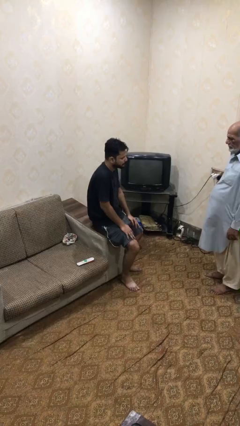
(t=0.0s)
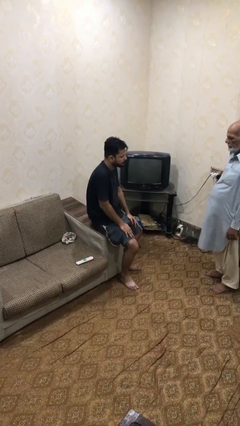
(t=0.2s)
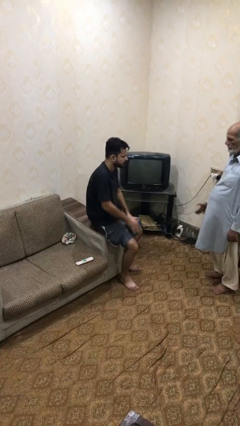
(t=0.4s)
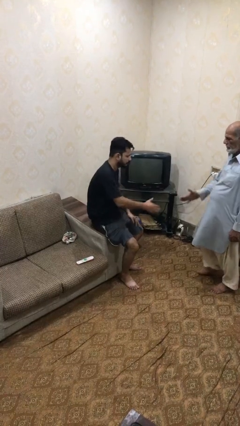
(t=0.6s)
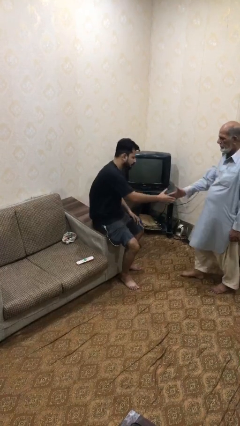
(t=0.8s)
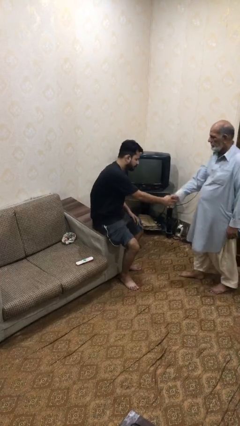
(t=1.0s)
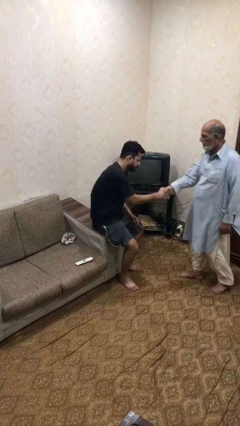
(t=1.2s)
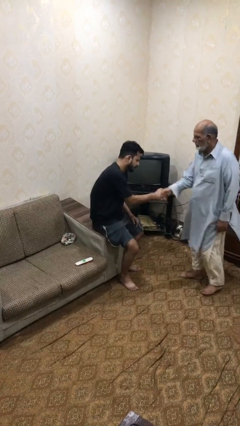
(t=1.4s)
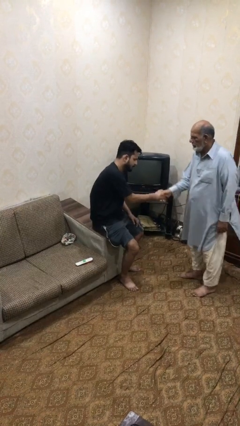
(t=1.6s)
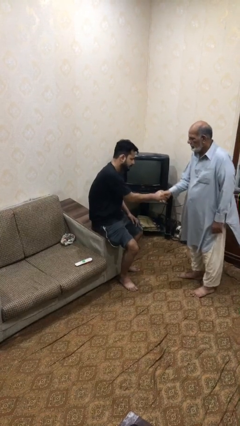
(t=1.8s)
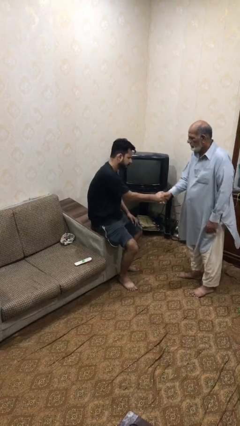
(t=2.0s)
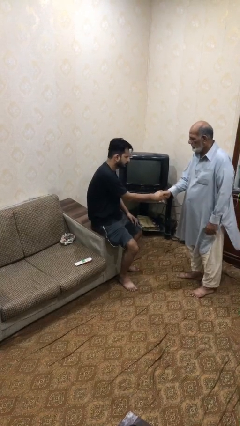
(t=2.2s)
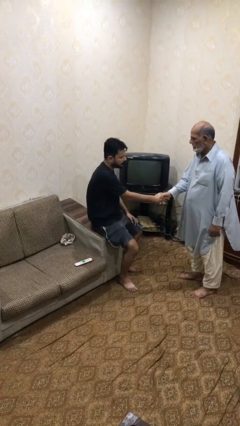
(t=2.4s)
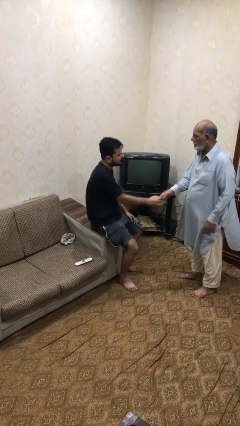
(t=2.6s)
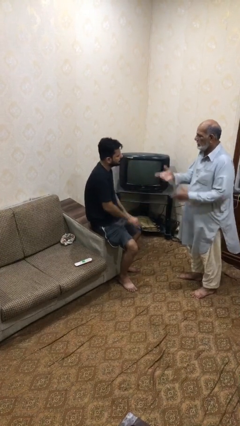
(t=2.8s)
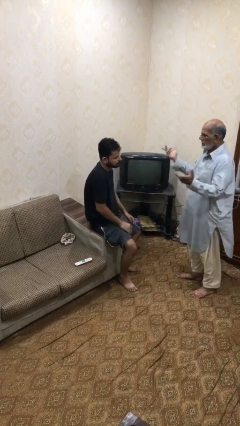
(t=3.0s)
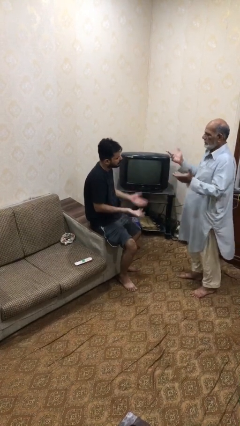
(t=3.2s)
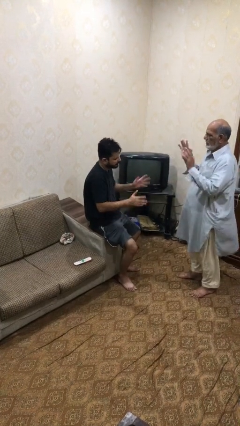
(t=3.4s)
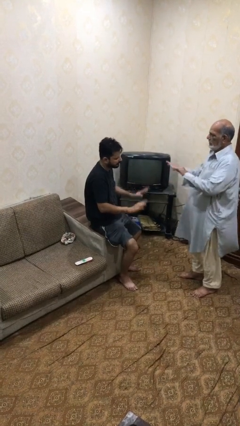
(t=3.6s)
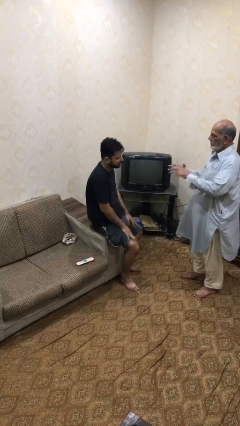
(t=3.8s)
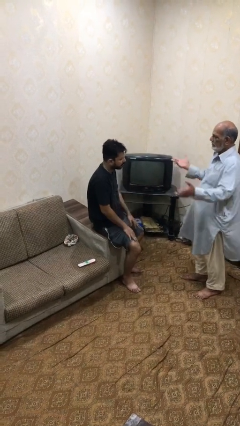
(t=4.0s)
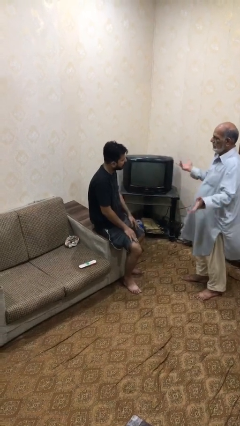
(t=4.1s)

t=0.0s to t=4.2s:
person shakes hand

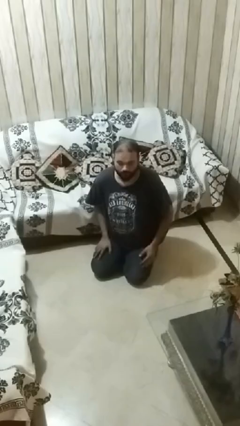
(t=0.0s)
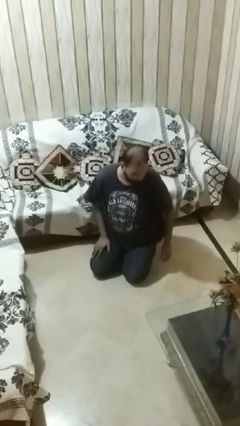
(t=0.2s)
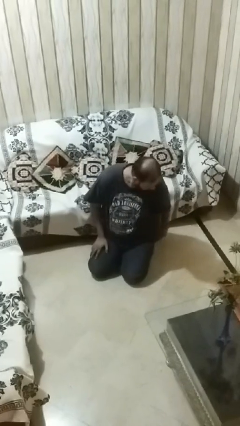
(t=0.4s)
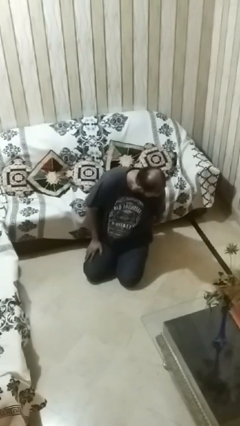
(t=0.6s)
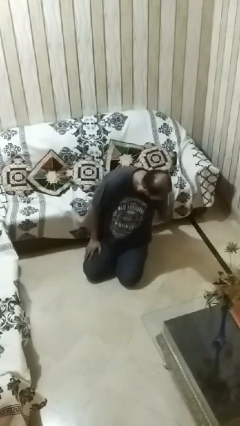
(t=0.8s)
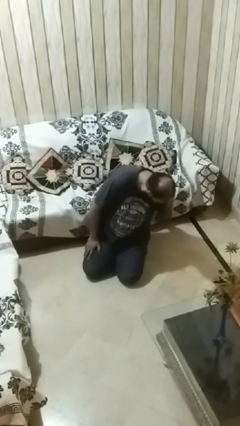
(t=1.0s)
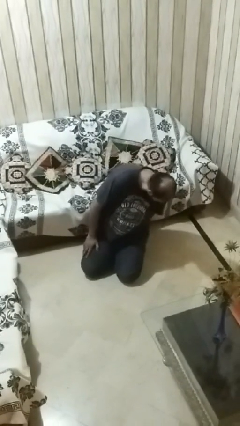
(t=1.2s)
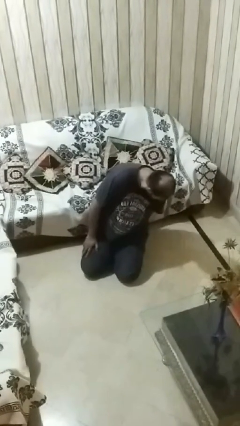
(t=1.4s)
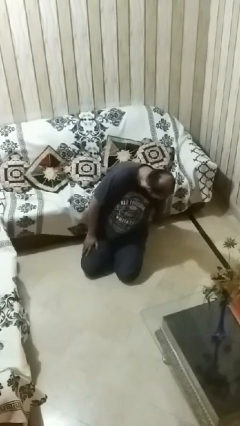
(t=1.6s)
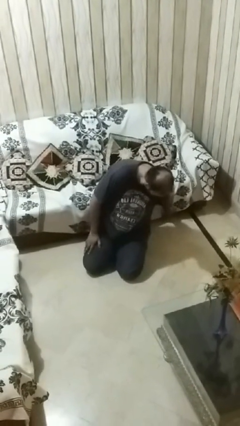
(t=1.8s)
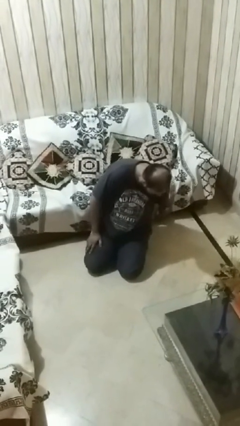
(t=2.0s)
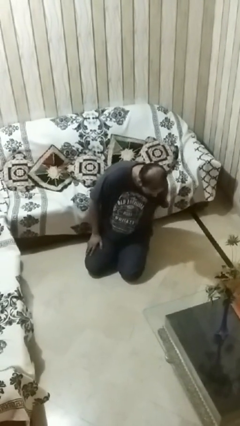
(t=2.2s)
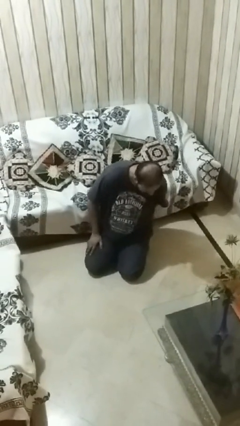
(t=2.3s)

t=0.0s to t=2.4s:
person searches under couch

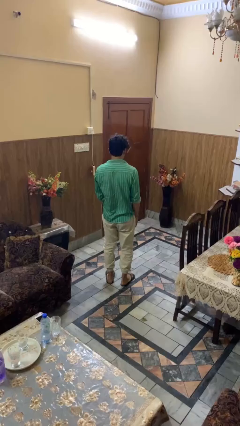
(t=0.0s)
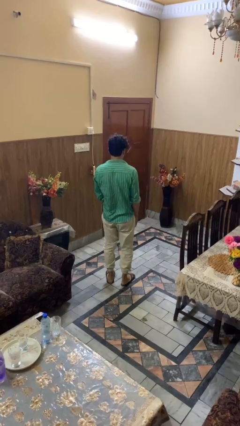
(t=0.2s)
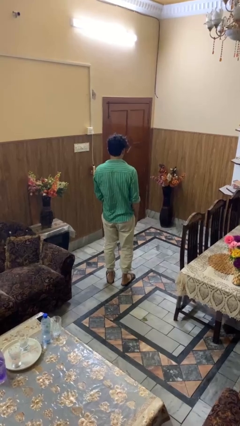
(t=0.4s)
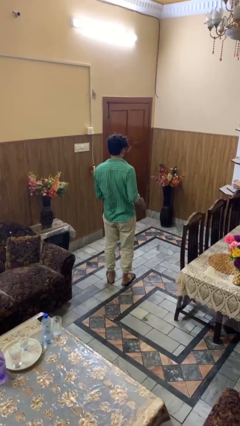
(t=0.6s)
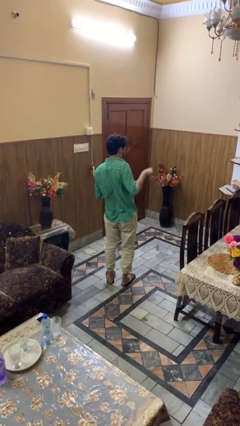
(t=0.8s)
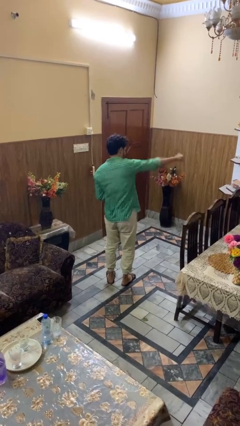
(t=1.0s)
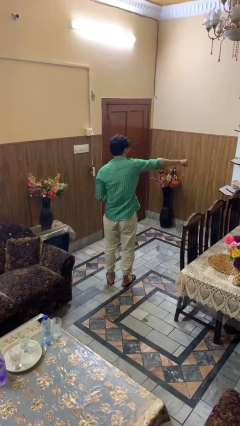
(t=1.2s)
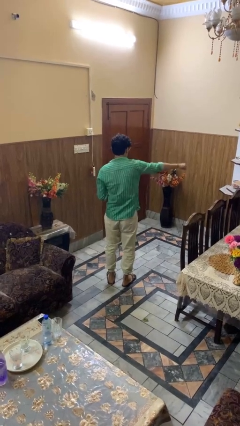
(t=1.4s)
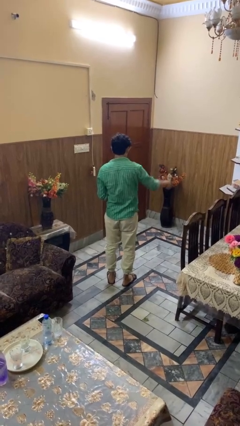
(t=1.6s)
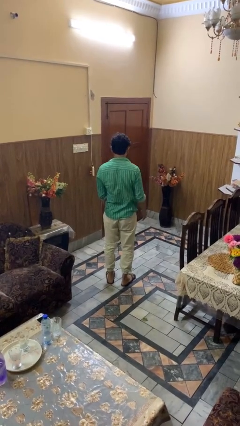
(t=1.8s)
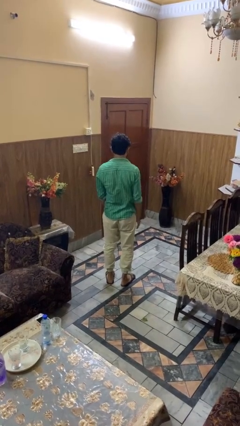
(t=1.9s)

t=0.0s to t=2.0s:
person karate chop

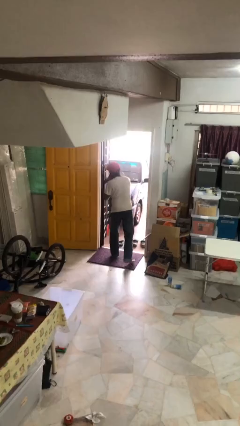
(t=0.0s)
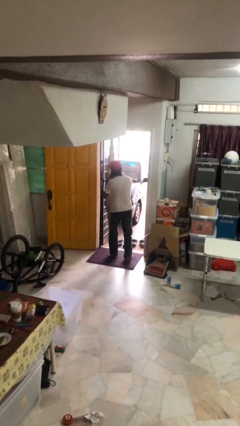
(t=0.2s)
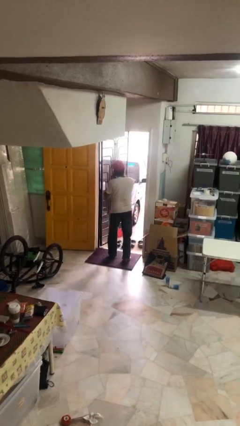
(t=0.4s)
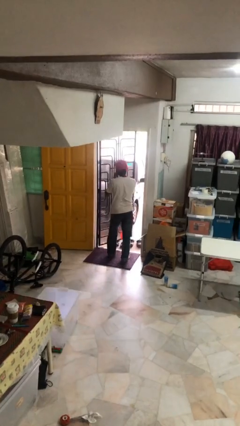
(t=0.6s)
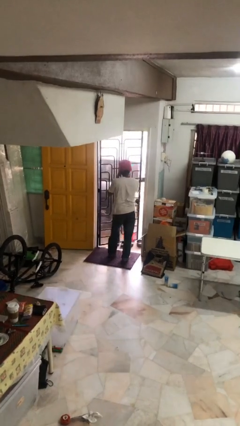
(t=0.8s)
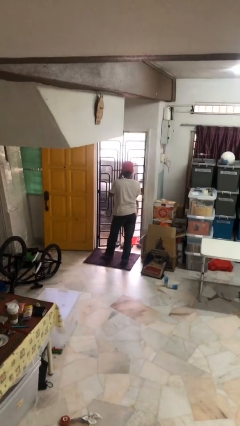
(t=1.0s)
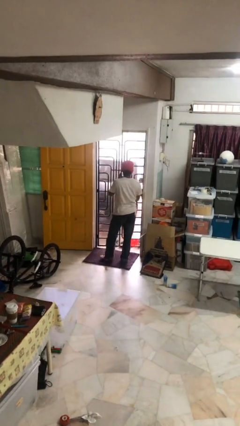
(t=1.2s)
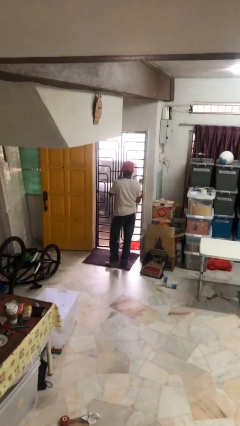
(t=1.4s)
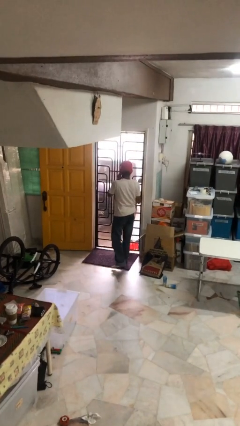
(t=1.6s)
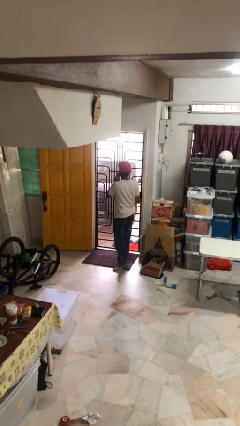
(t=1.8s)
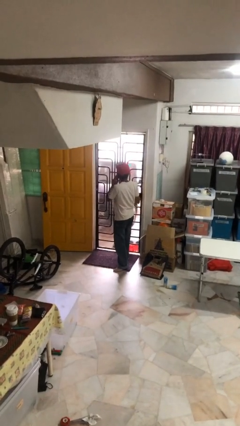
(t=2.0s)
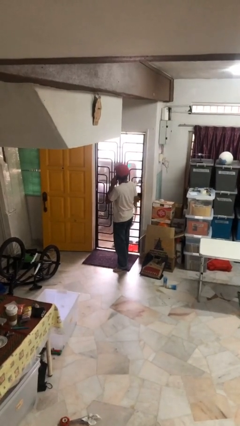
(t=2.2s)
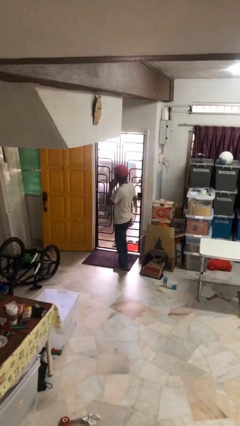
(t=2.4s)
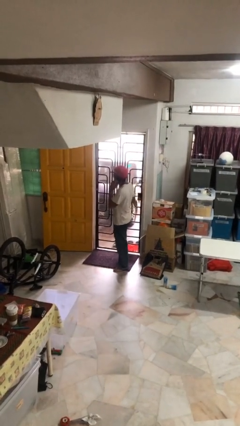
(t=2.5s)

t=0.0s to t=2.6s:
person closes facility door

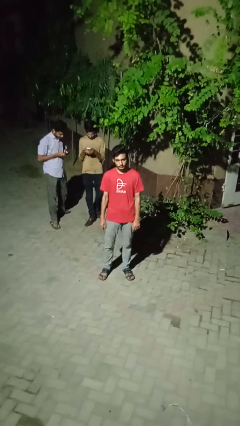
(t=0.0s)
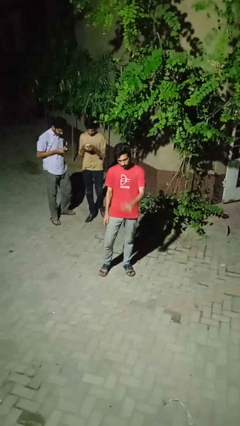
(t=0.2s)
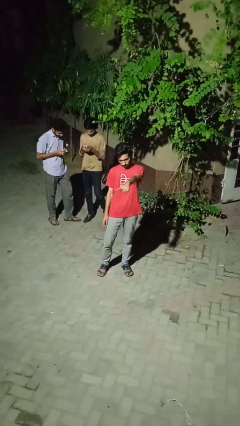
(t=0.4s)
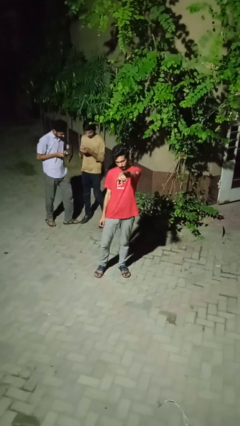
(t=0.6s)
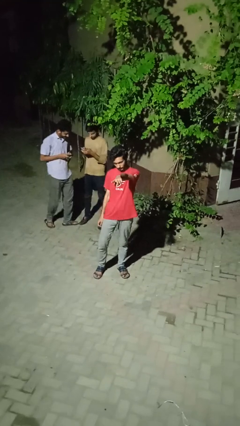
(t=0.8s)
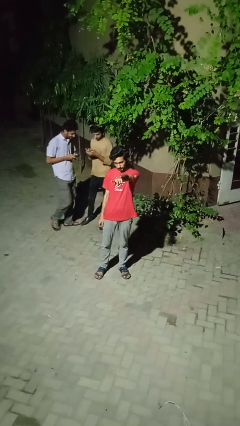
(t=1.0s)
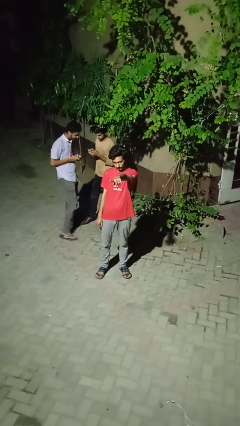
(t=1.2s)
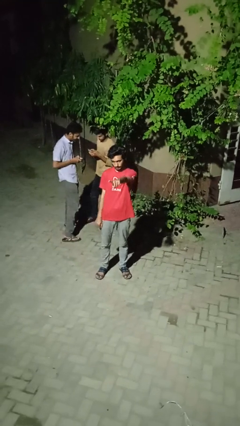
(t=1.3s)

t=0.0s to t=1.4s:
person points at person

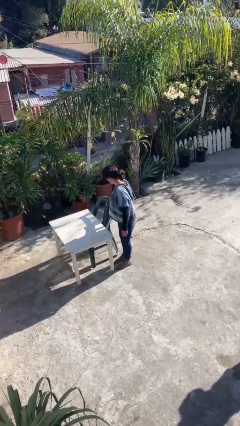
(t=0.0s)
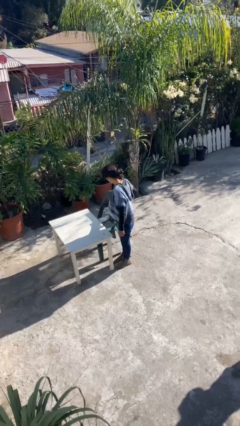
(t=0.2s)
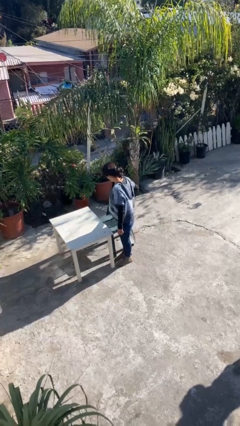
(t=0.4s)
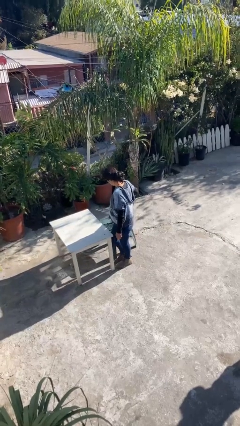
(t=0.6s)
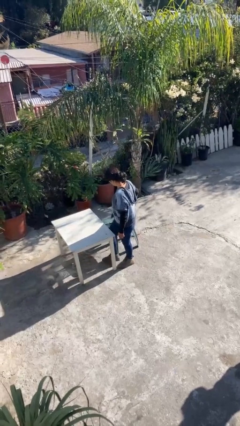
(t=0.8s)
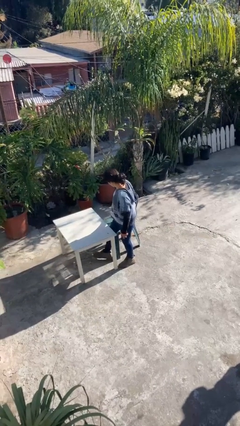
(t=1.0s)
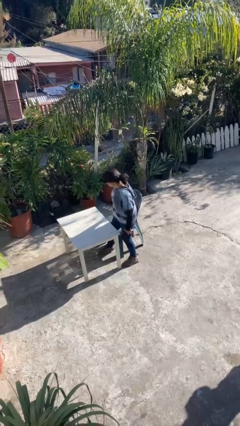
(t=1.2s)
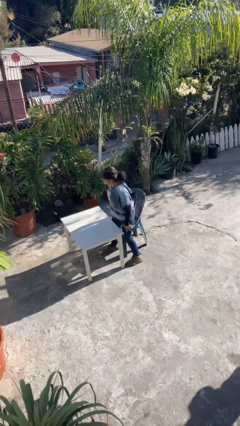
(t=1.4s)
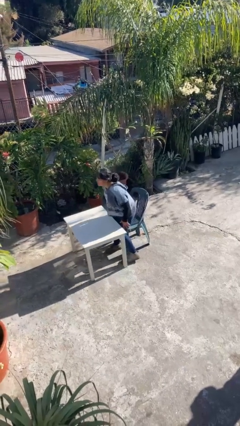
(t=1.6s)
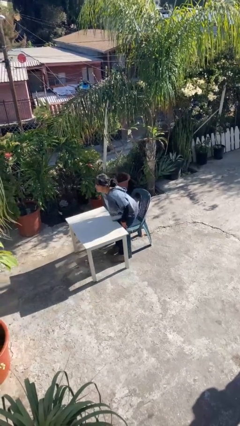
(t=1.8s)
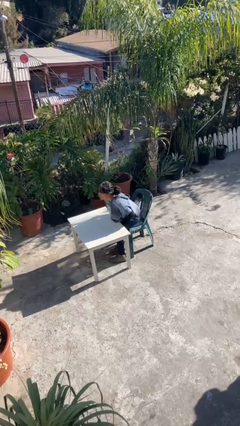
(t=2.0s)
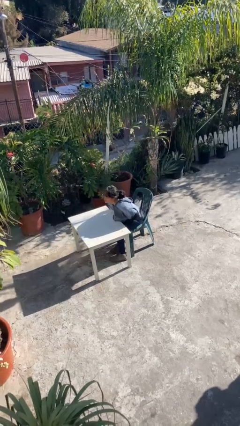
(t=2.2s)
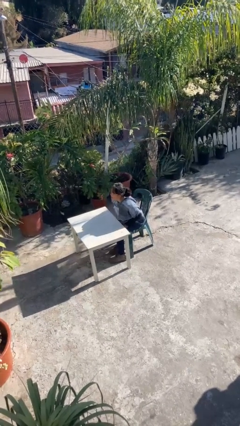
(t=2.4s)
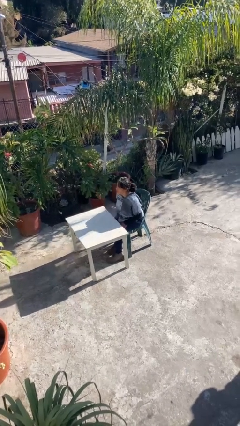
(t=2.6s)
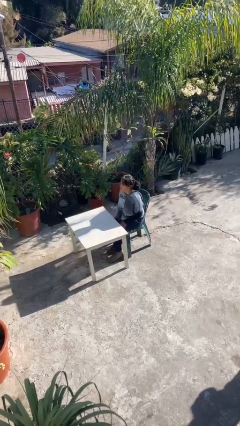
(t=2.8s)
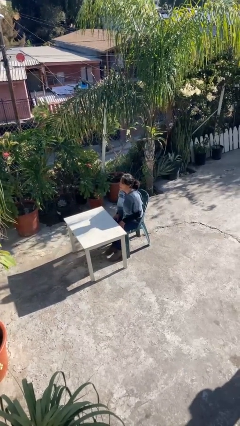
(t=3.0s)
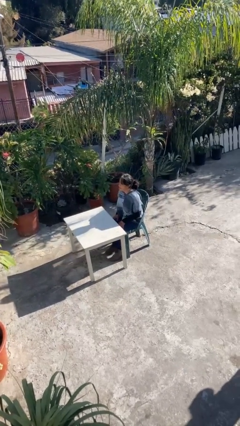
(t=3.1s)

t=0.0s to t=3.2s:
person sits down

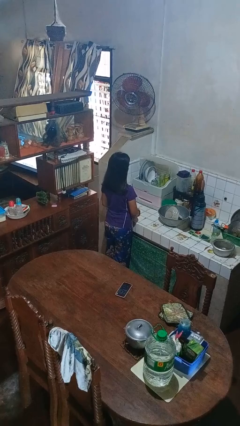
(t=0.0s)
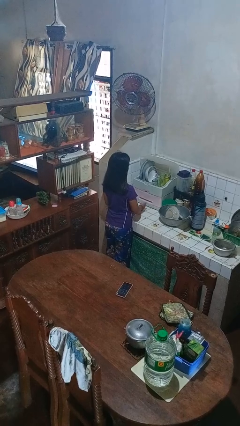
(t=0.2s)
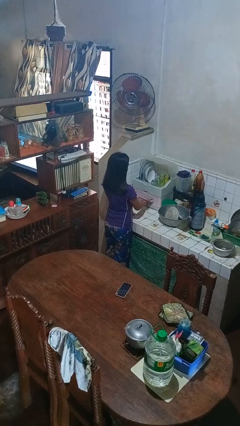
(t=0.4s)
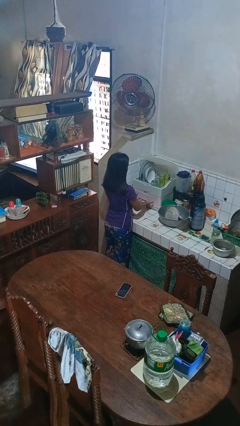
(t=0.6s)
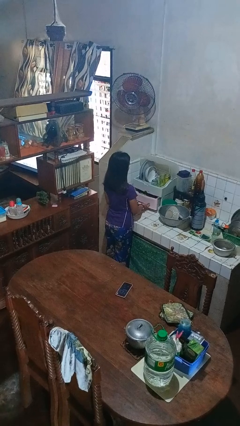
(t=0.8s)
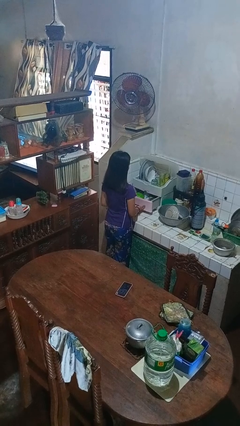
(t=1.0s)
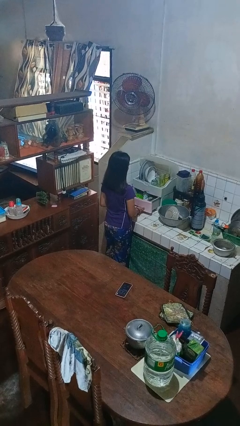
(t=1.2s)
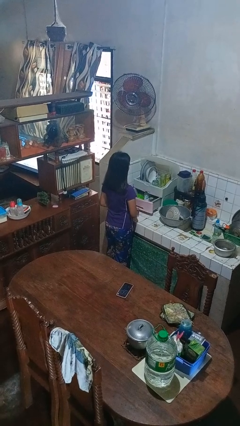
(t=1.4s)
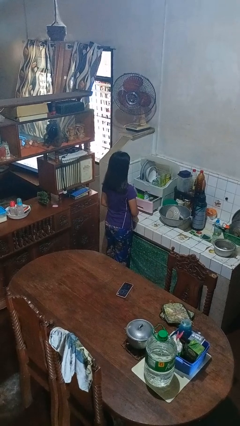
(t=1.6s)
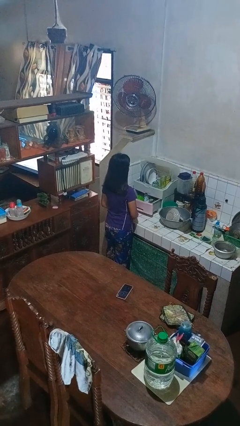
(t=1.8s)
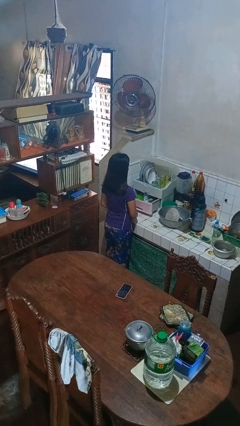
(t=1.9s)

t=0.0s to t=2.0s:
person opens kitchen drawer
